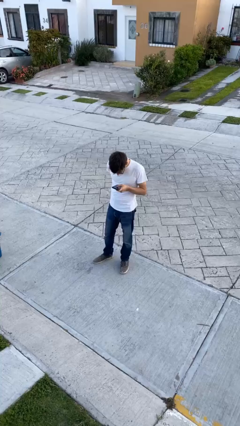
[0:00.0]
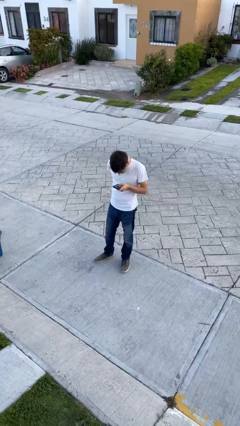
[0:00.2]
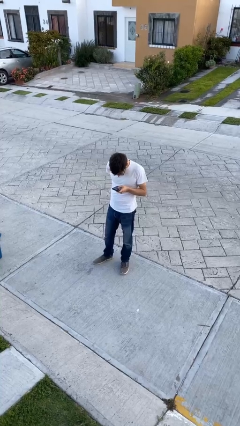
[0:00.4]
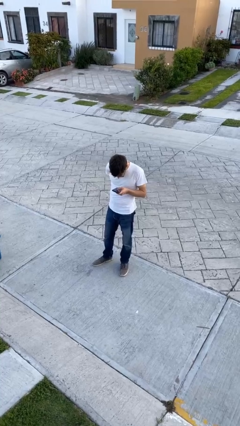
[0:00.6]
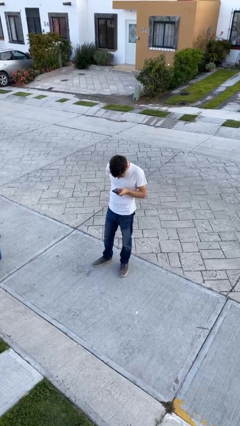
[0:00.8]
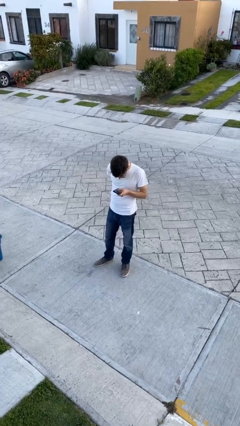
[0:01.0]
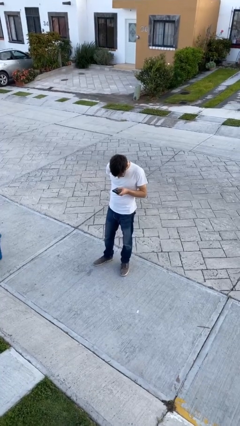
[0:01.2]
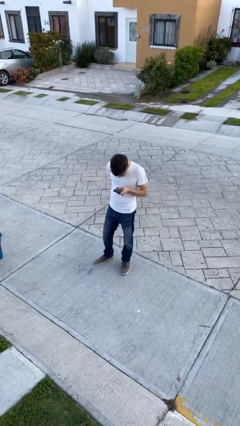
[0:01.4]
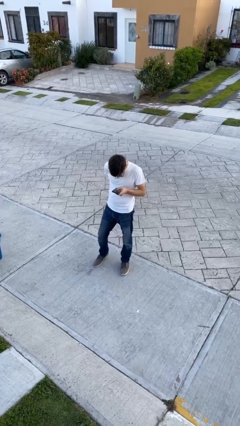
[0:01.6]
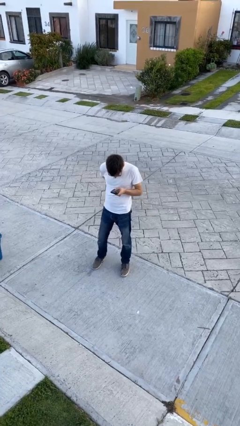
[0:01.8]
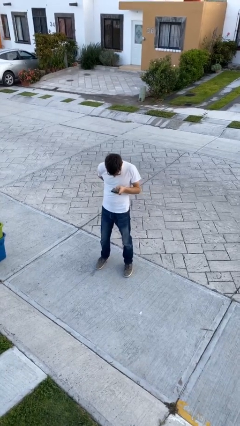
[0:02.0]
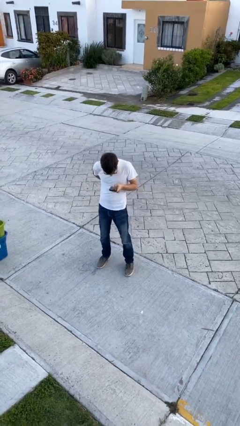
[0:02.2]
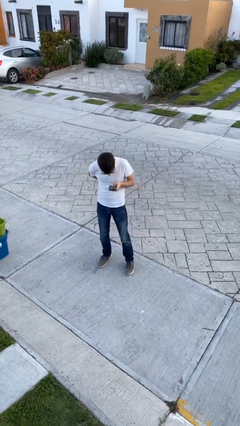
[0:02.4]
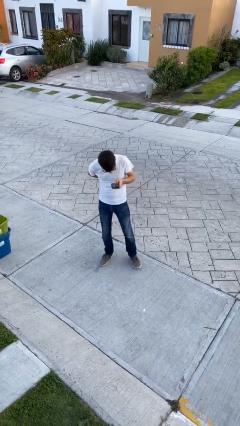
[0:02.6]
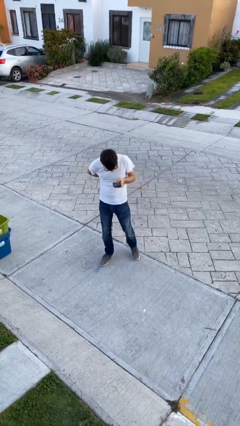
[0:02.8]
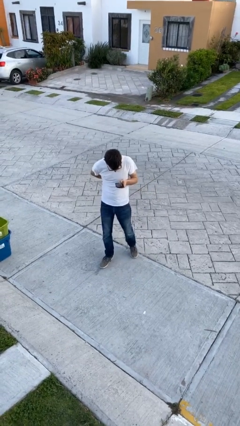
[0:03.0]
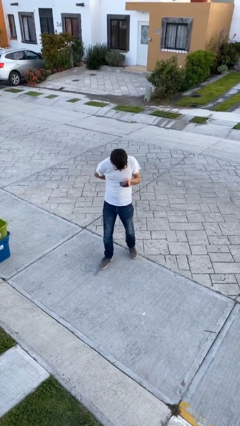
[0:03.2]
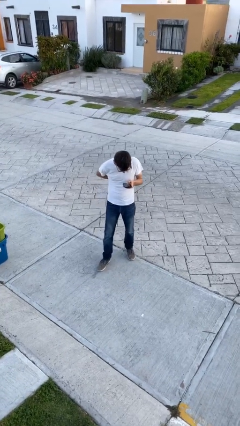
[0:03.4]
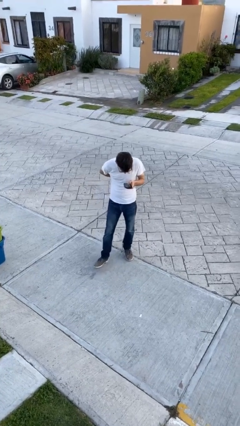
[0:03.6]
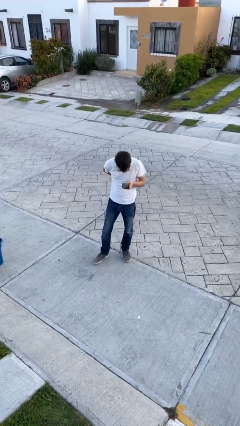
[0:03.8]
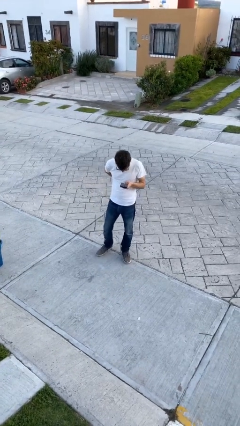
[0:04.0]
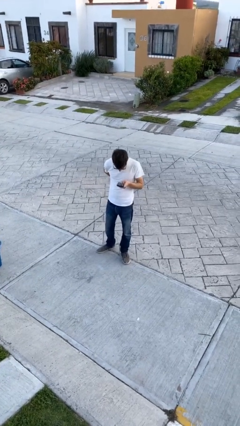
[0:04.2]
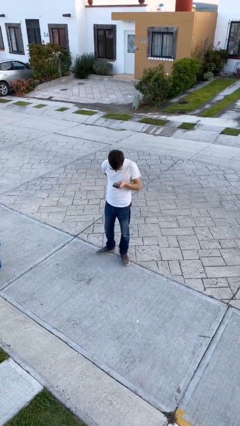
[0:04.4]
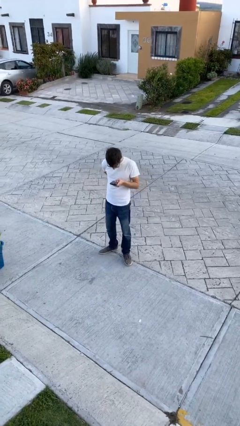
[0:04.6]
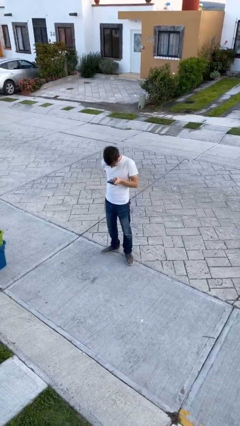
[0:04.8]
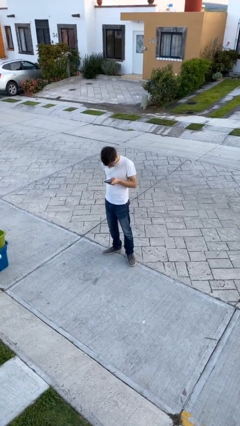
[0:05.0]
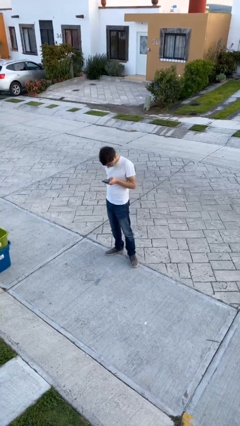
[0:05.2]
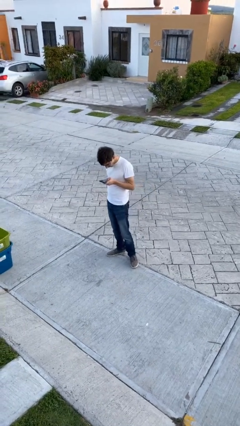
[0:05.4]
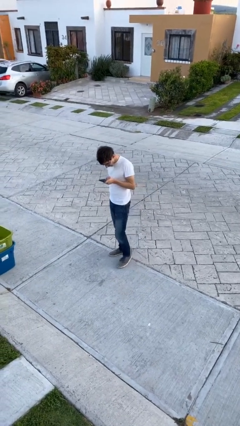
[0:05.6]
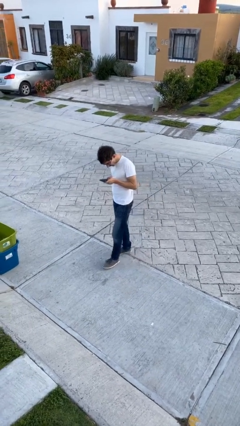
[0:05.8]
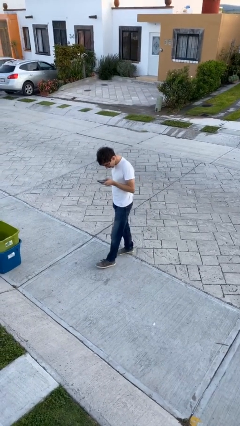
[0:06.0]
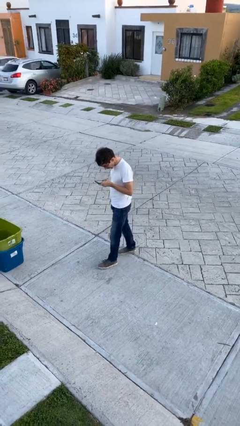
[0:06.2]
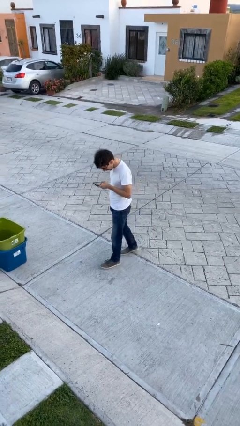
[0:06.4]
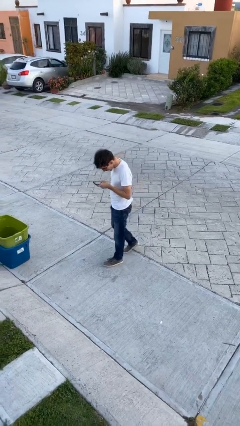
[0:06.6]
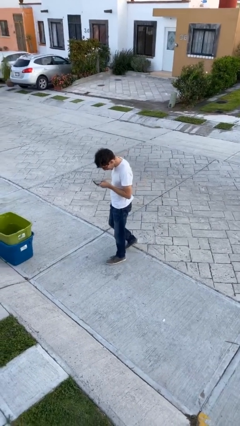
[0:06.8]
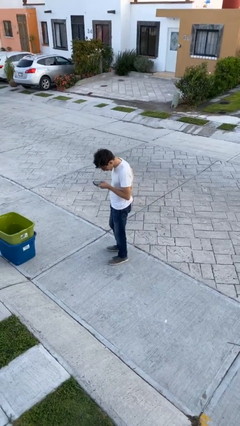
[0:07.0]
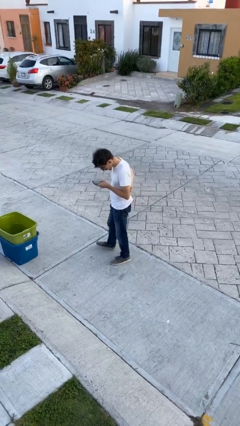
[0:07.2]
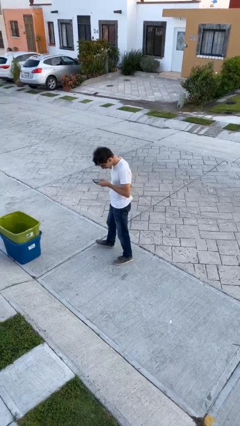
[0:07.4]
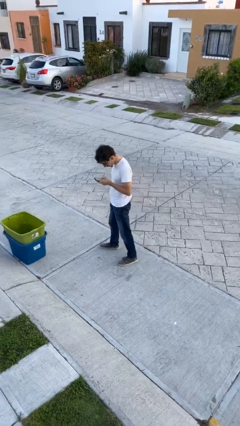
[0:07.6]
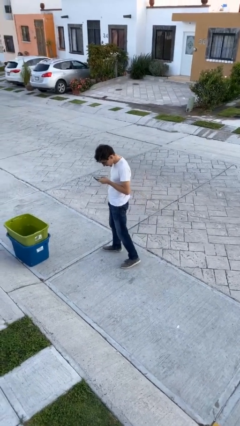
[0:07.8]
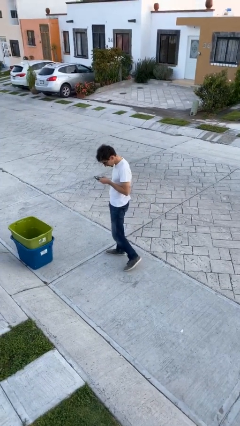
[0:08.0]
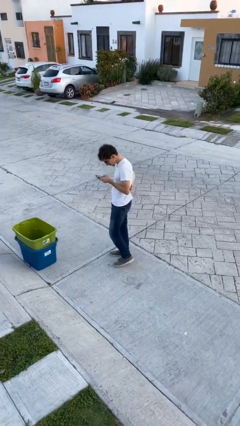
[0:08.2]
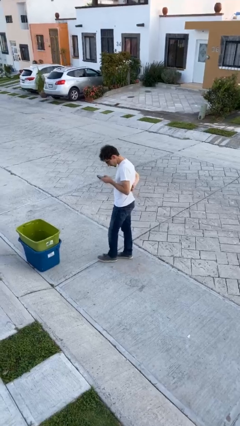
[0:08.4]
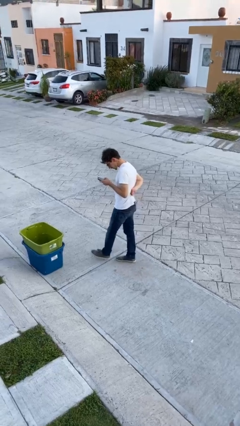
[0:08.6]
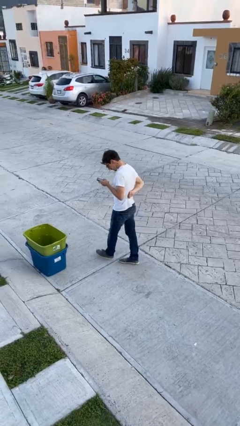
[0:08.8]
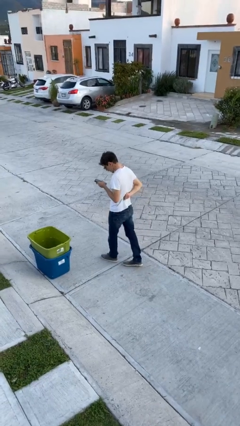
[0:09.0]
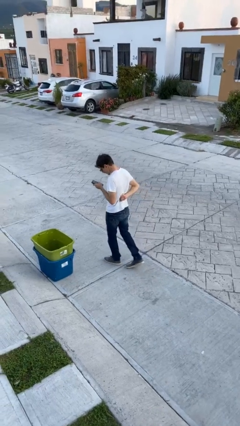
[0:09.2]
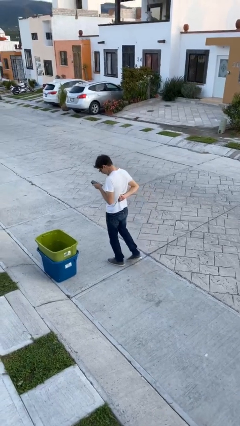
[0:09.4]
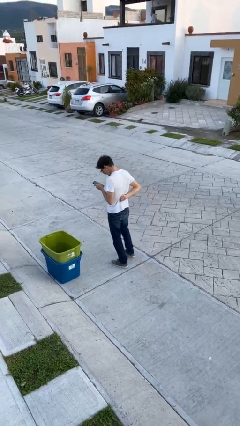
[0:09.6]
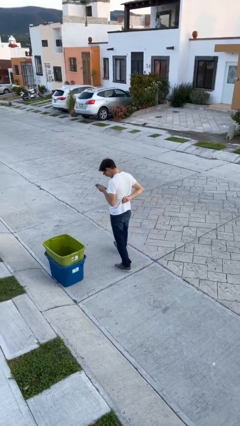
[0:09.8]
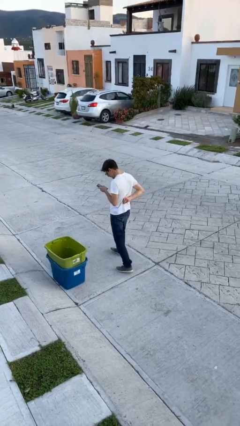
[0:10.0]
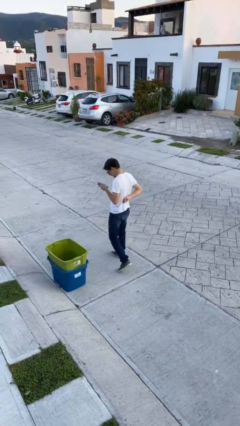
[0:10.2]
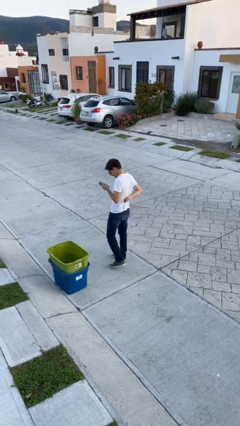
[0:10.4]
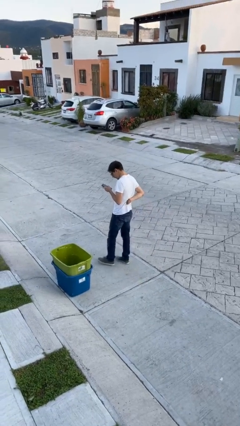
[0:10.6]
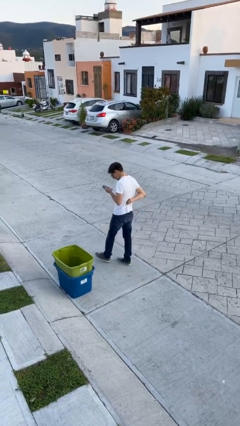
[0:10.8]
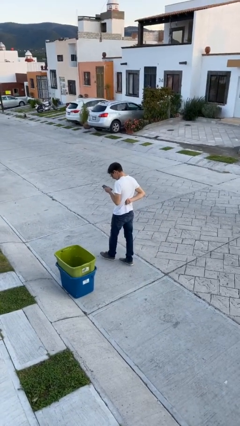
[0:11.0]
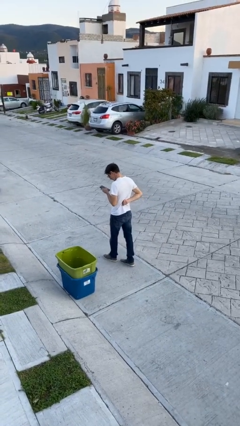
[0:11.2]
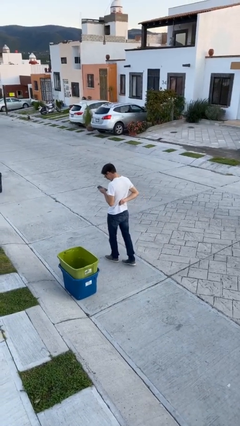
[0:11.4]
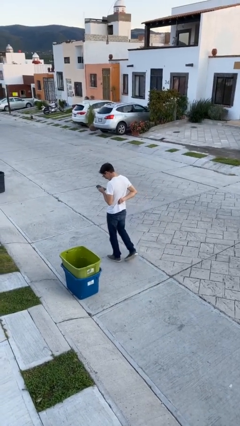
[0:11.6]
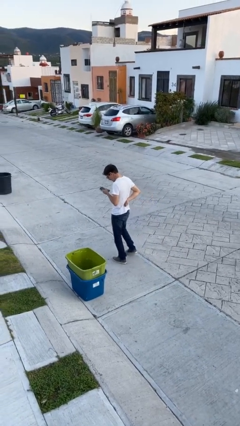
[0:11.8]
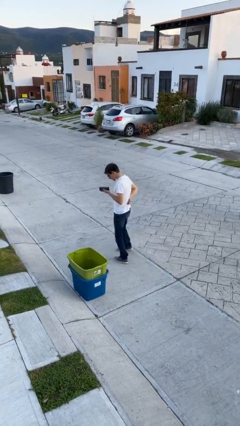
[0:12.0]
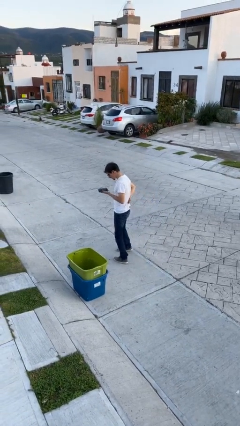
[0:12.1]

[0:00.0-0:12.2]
person texts on phone

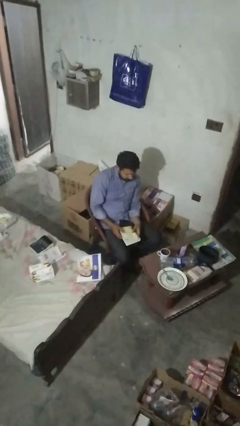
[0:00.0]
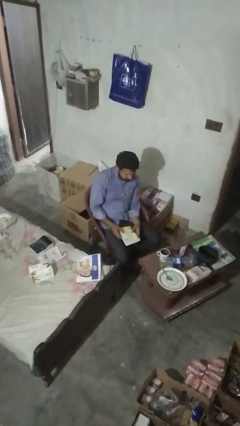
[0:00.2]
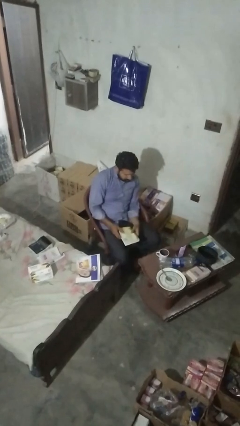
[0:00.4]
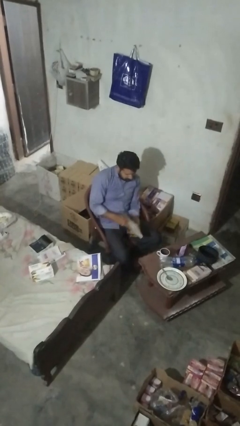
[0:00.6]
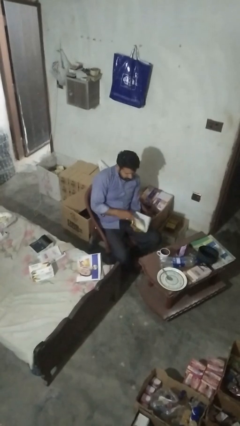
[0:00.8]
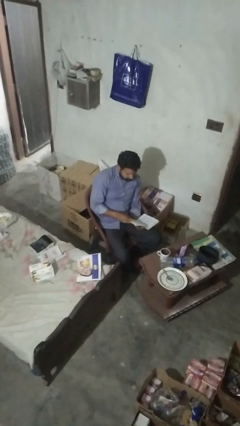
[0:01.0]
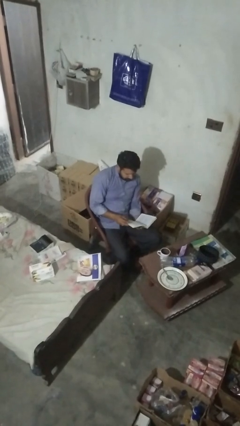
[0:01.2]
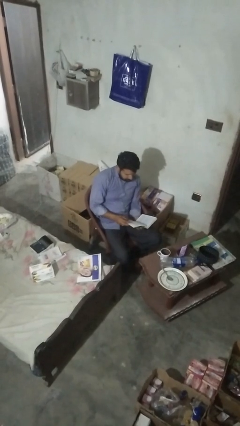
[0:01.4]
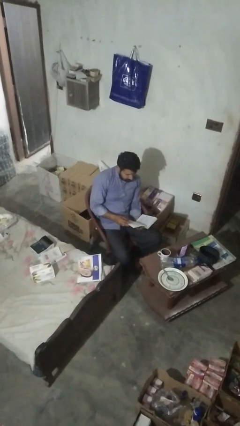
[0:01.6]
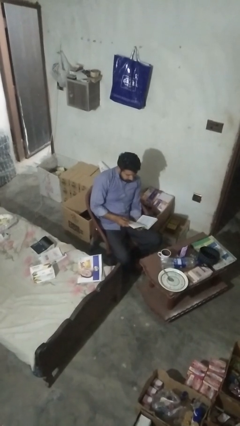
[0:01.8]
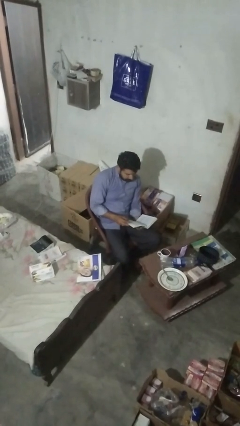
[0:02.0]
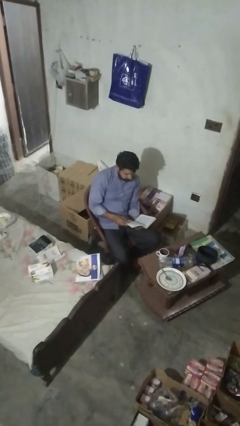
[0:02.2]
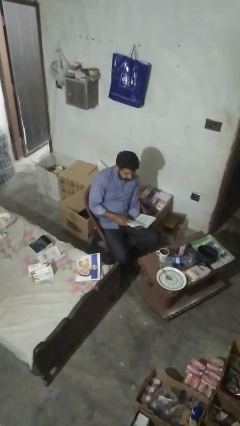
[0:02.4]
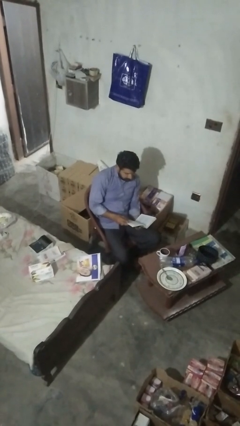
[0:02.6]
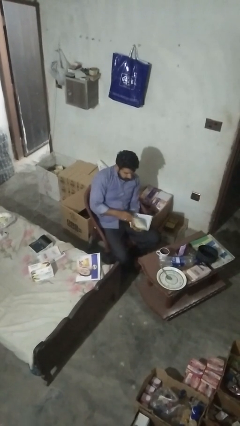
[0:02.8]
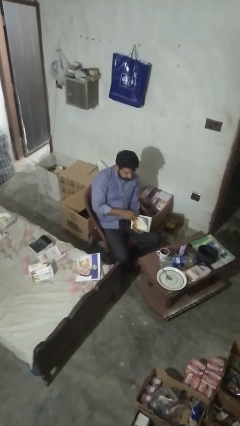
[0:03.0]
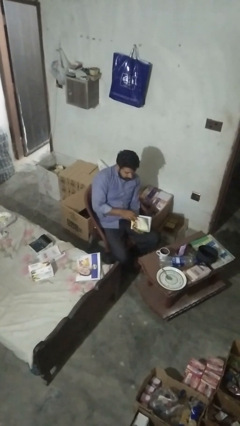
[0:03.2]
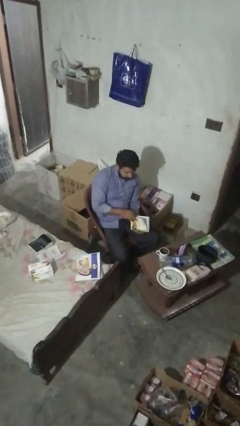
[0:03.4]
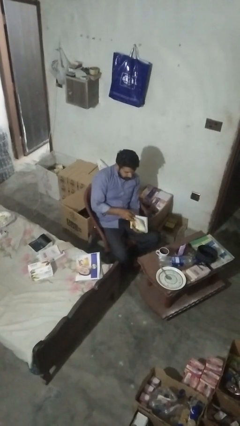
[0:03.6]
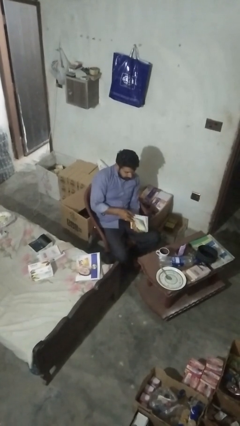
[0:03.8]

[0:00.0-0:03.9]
person reads book

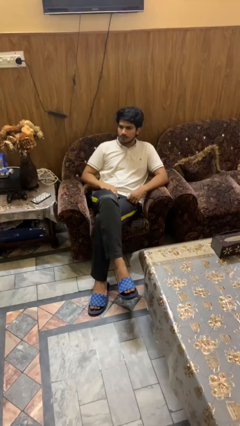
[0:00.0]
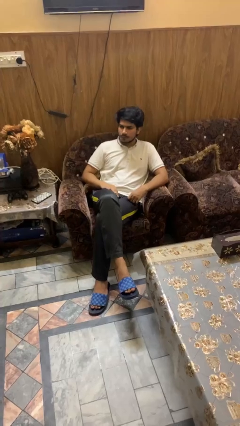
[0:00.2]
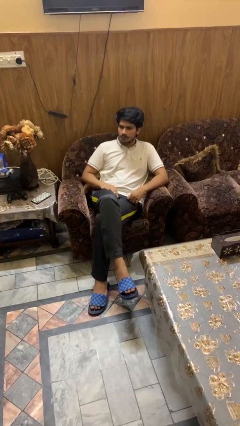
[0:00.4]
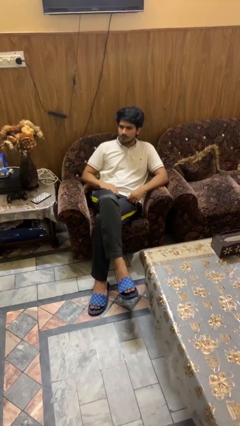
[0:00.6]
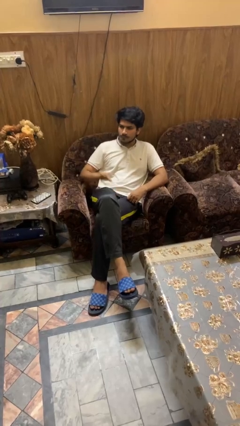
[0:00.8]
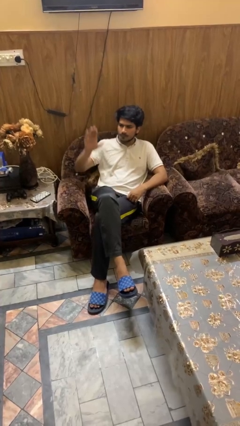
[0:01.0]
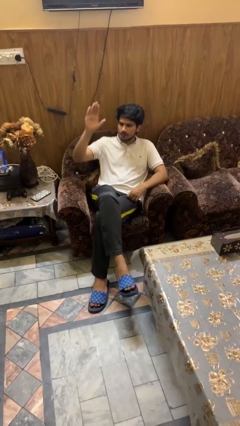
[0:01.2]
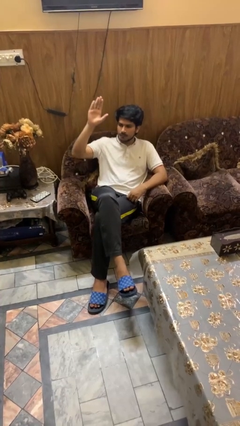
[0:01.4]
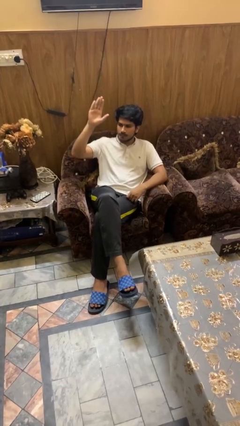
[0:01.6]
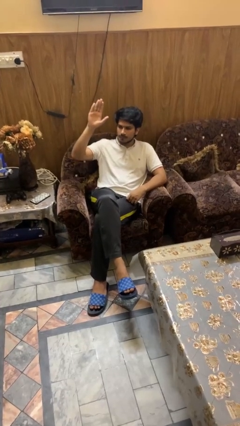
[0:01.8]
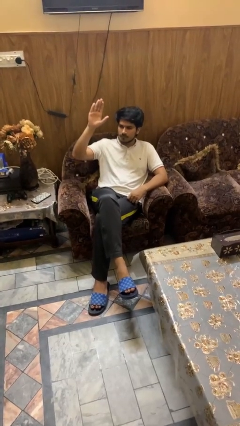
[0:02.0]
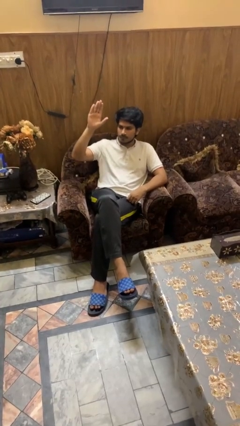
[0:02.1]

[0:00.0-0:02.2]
person gestures raise hand
